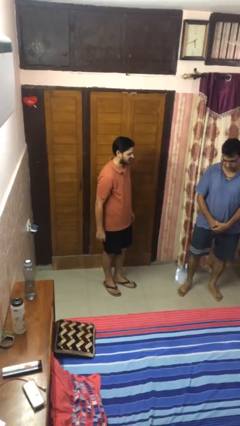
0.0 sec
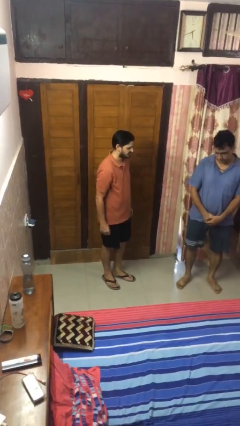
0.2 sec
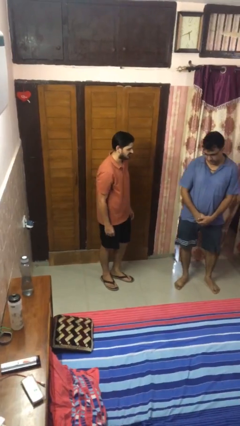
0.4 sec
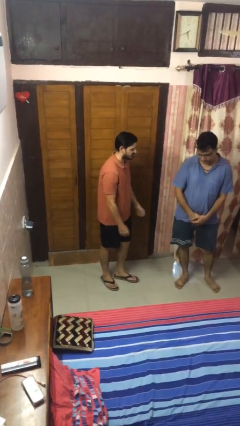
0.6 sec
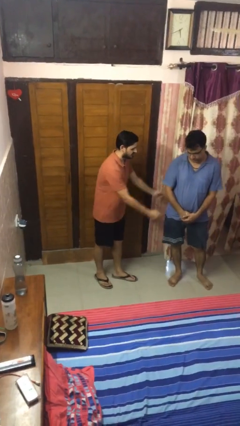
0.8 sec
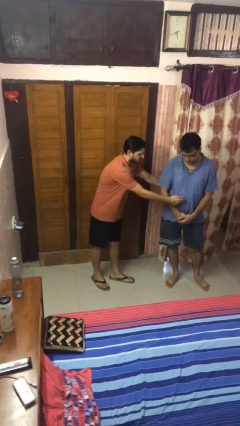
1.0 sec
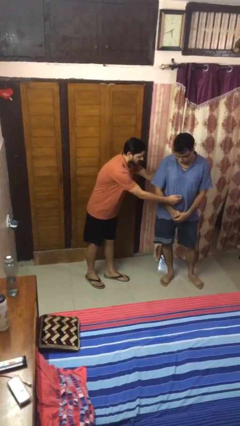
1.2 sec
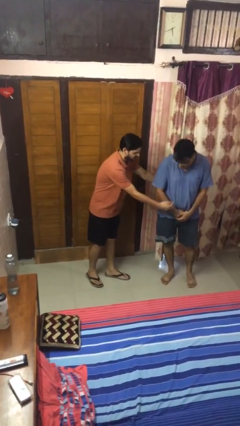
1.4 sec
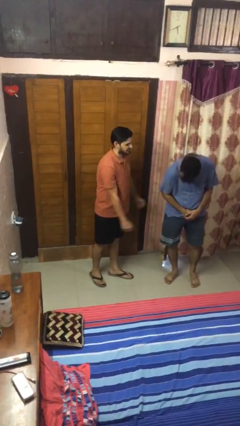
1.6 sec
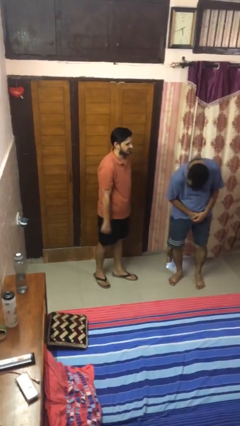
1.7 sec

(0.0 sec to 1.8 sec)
person tickles person

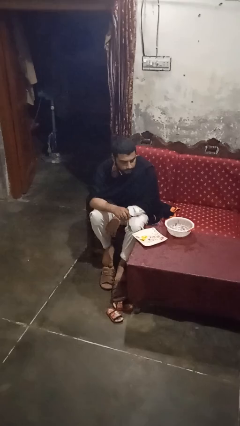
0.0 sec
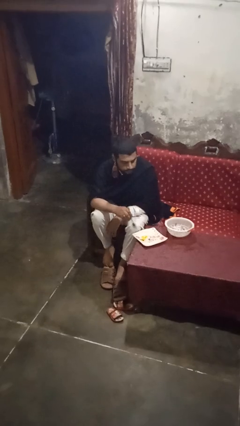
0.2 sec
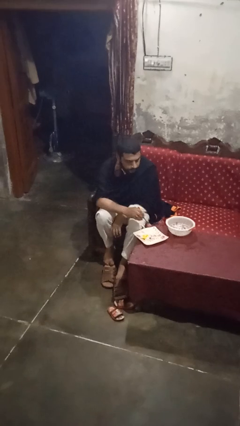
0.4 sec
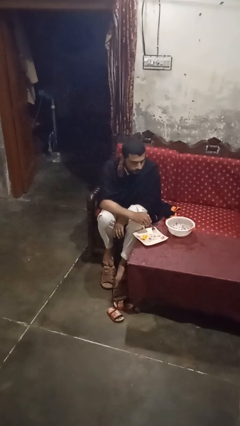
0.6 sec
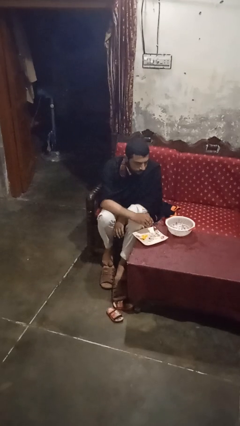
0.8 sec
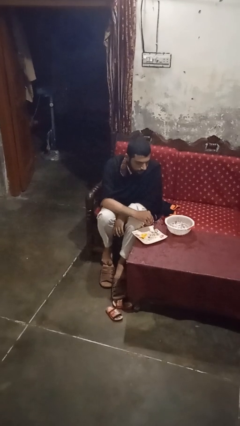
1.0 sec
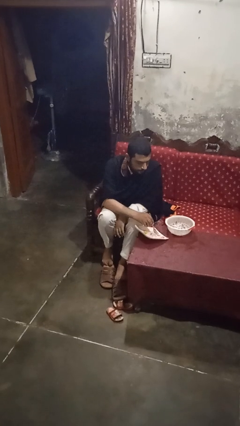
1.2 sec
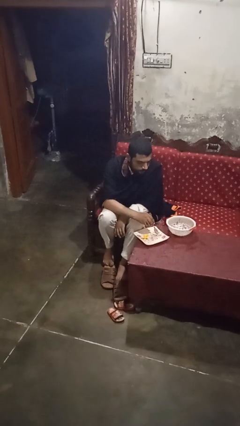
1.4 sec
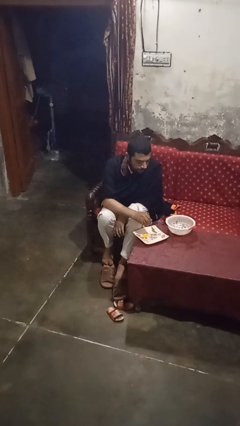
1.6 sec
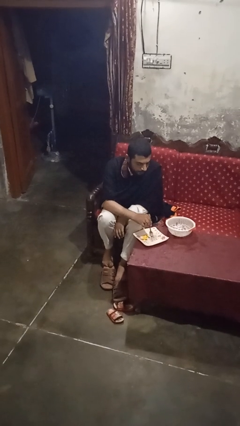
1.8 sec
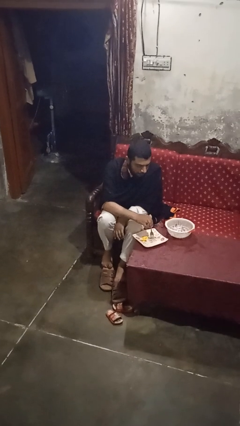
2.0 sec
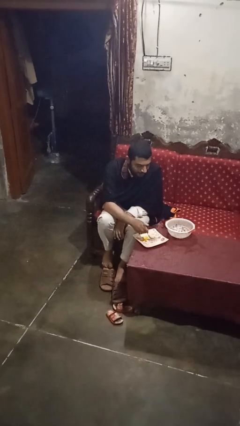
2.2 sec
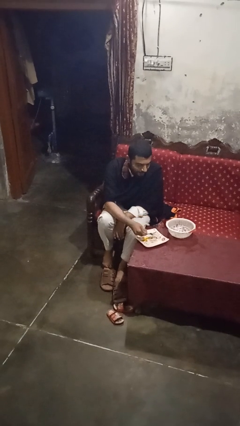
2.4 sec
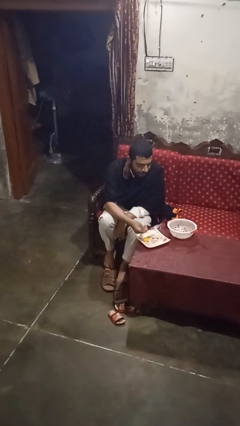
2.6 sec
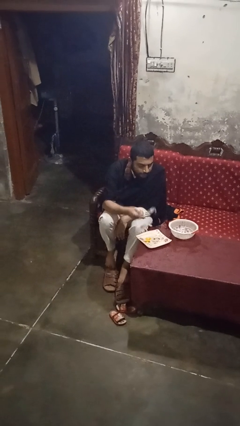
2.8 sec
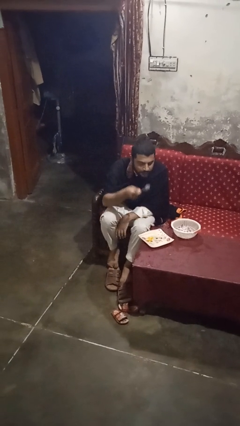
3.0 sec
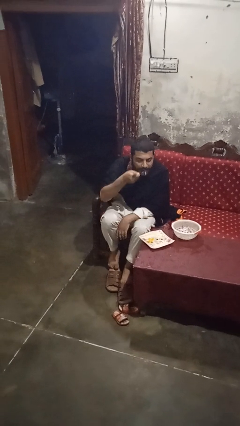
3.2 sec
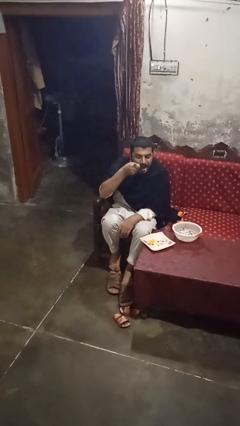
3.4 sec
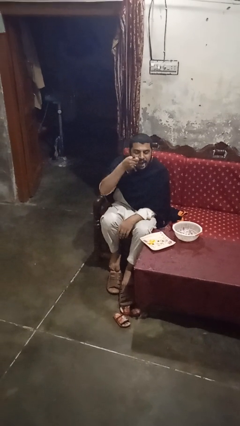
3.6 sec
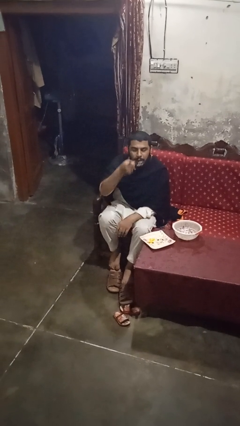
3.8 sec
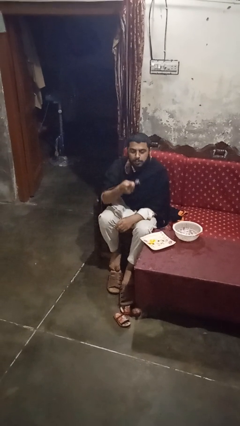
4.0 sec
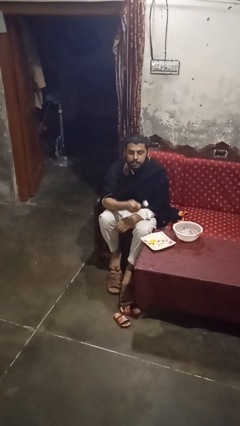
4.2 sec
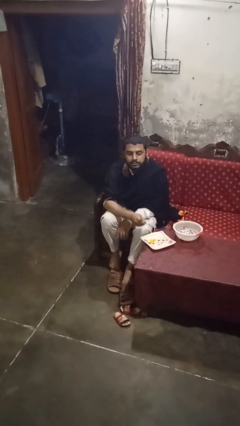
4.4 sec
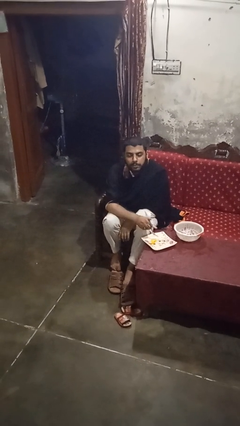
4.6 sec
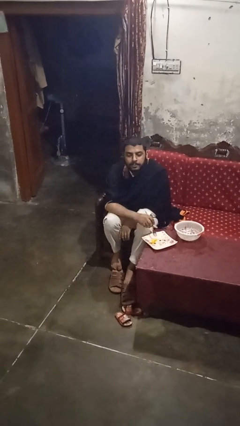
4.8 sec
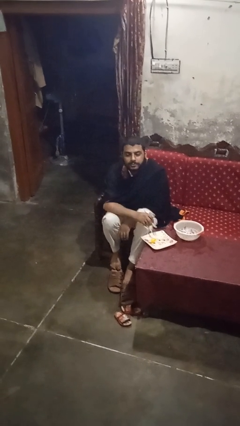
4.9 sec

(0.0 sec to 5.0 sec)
person eats with utensil

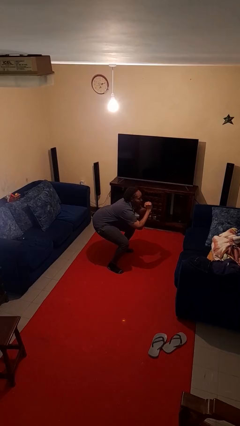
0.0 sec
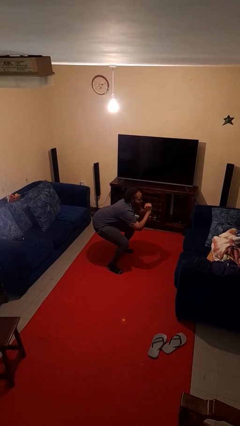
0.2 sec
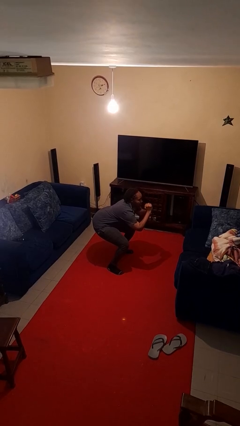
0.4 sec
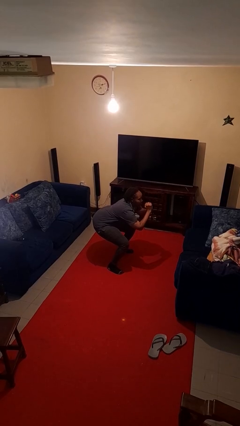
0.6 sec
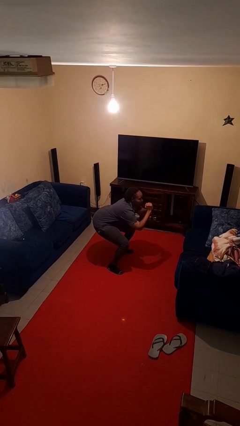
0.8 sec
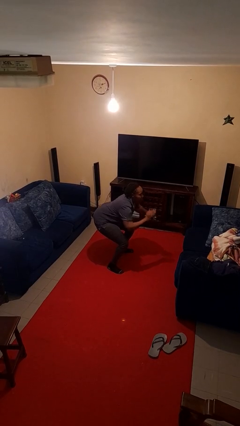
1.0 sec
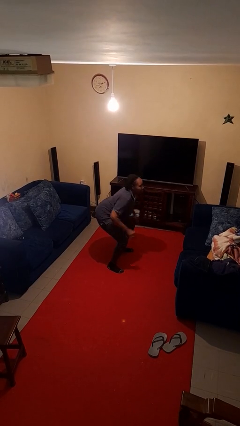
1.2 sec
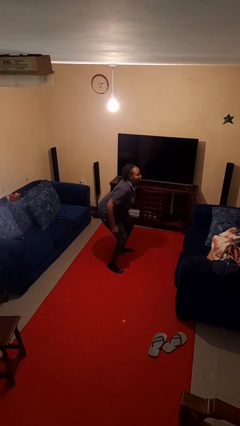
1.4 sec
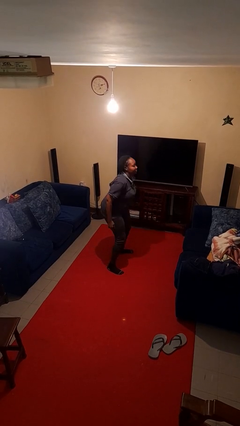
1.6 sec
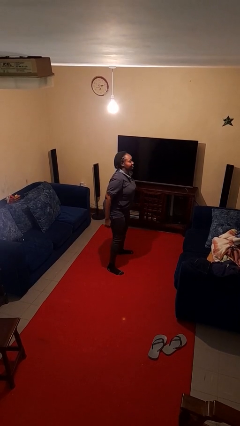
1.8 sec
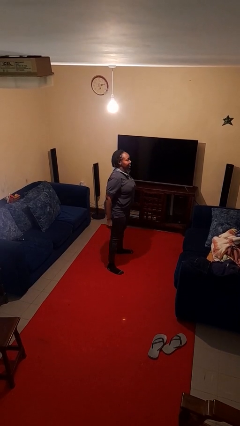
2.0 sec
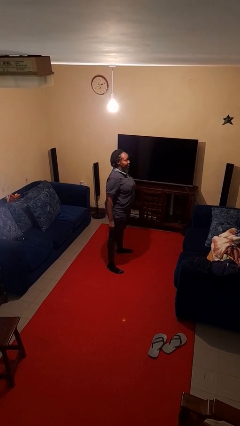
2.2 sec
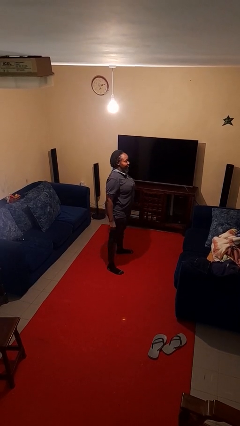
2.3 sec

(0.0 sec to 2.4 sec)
person stands up

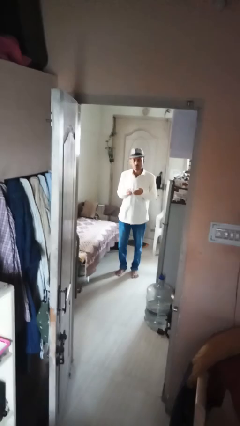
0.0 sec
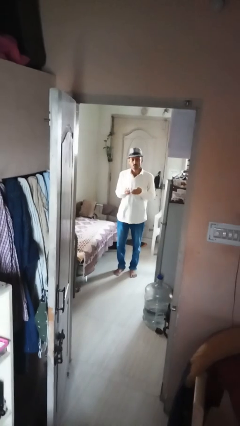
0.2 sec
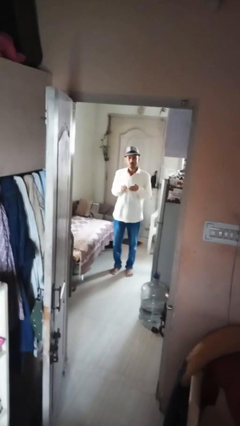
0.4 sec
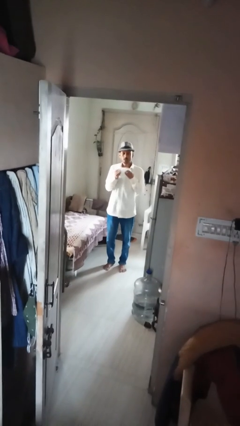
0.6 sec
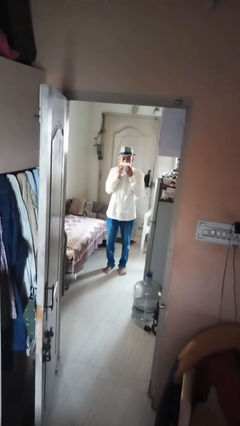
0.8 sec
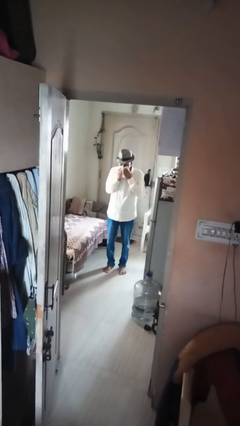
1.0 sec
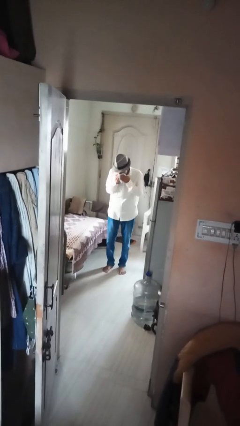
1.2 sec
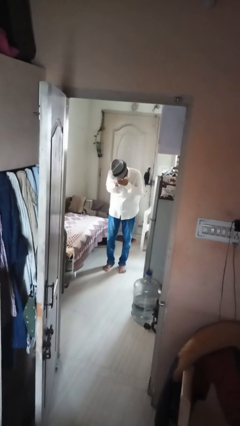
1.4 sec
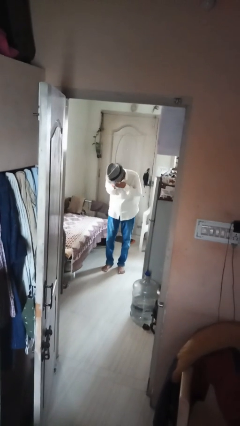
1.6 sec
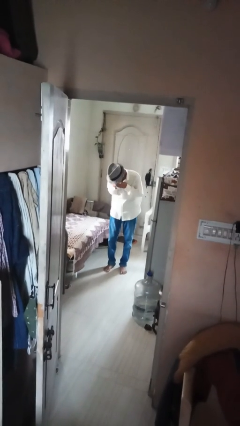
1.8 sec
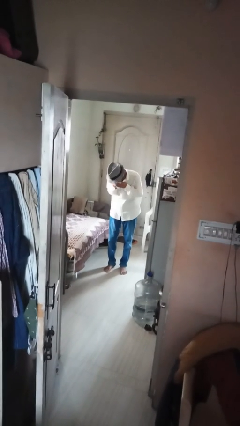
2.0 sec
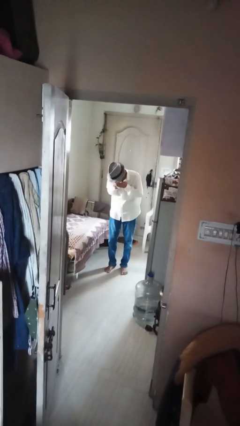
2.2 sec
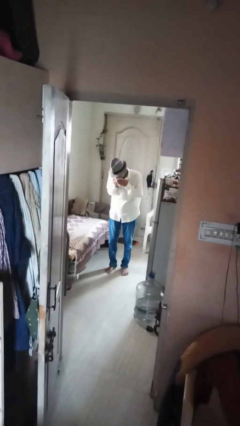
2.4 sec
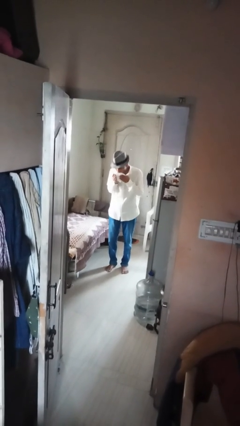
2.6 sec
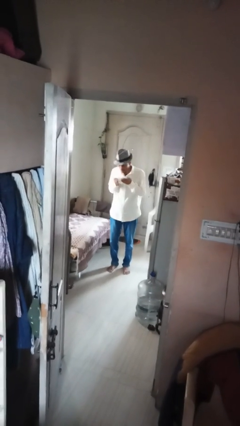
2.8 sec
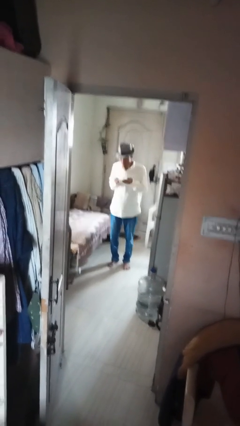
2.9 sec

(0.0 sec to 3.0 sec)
person blows nose

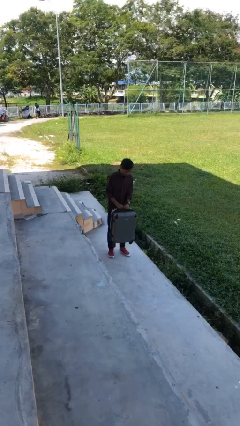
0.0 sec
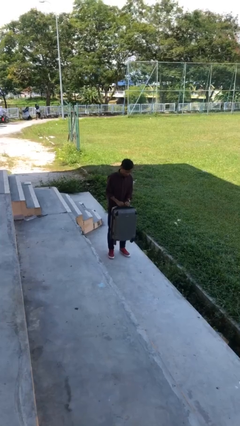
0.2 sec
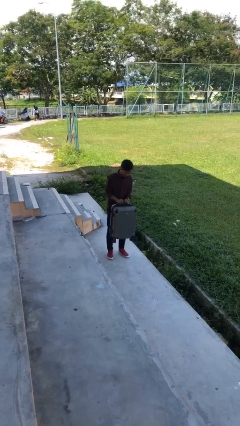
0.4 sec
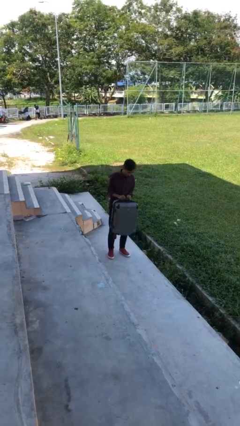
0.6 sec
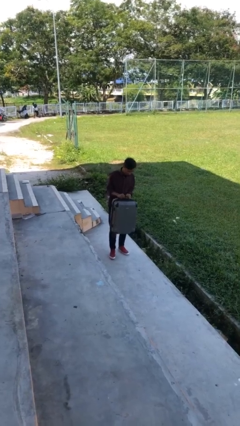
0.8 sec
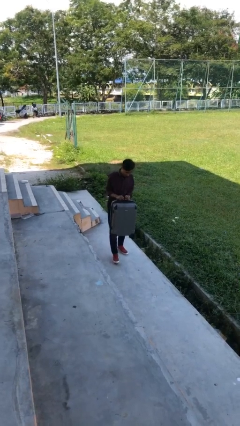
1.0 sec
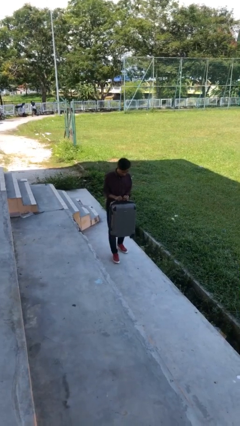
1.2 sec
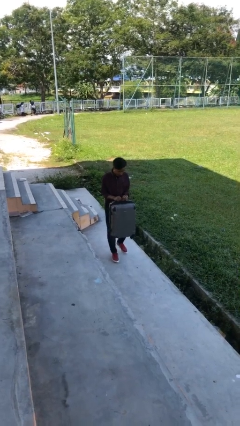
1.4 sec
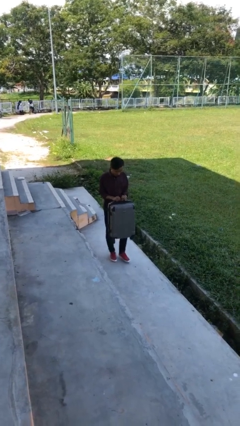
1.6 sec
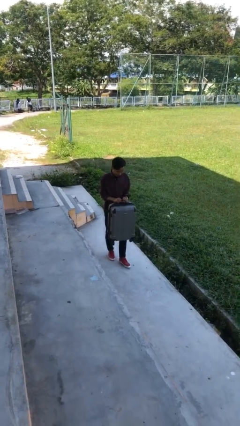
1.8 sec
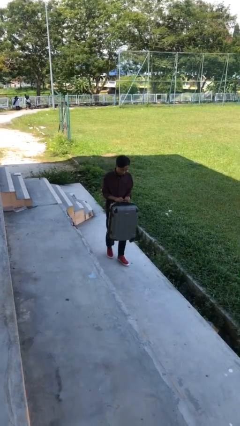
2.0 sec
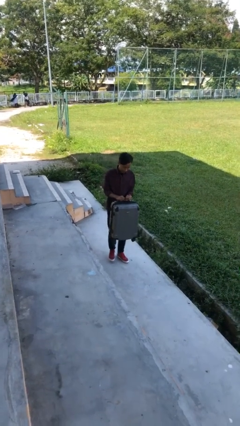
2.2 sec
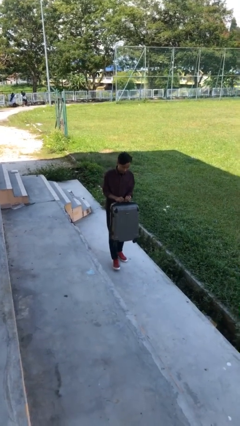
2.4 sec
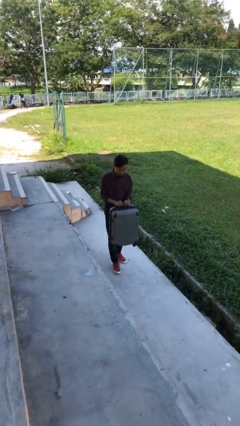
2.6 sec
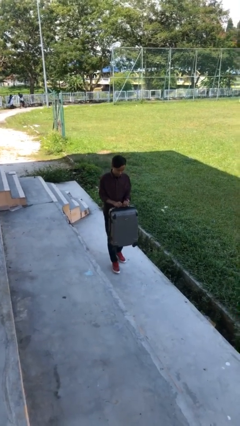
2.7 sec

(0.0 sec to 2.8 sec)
person carries heavy object

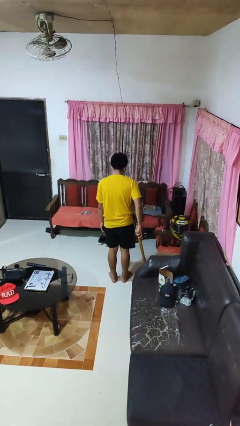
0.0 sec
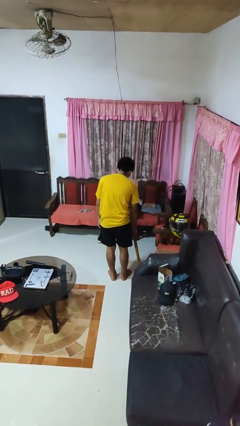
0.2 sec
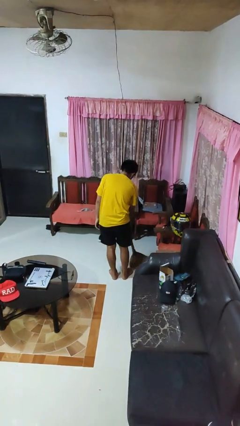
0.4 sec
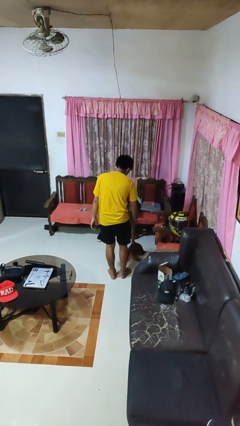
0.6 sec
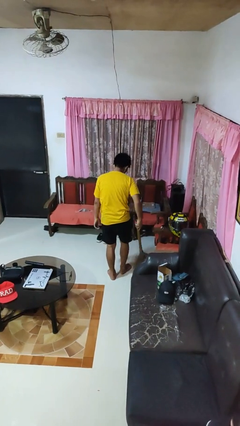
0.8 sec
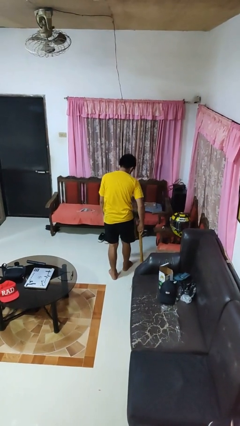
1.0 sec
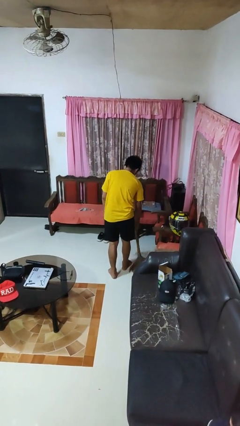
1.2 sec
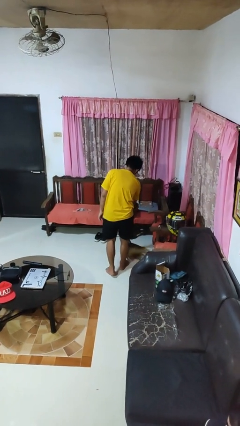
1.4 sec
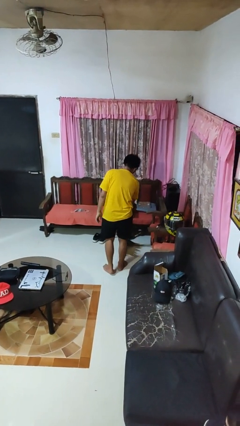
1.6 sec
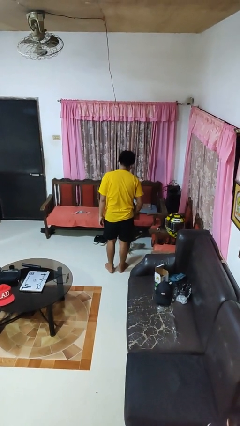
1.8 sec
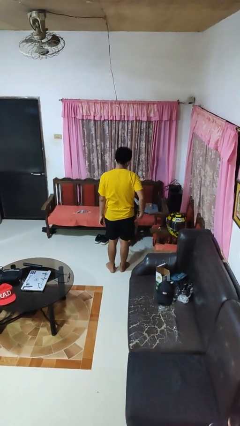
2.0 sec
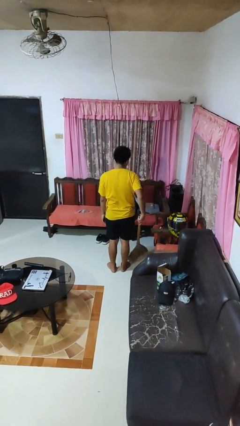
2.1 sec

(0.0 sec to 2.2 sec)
person sweeps floor
